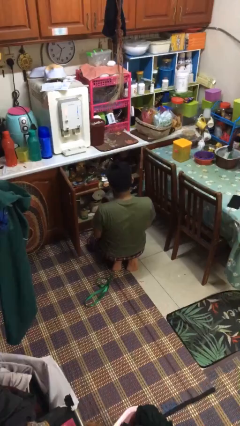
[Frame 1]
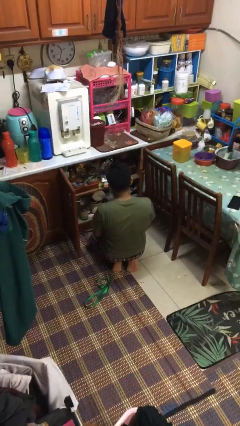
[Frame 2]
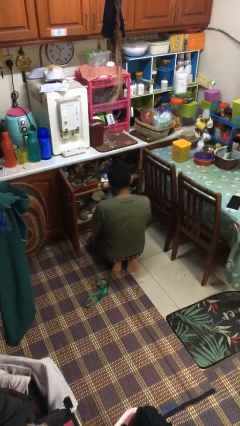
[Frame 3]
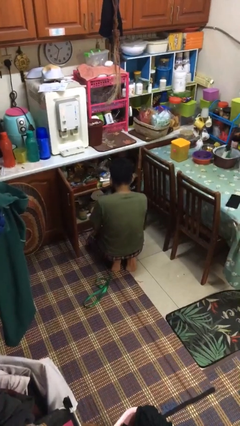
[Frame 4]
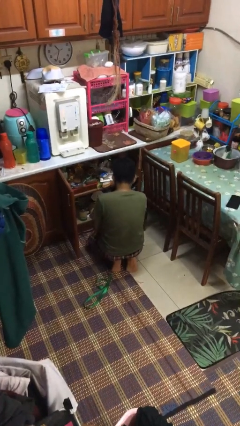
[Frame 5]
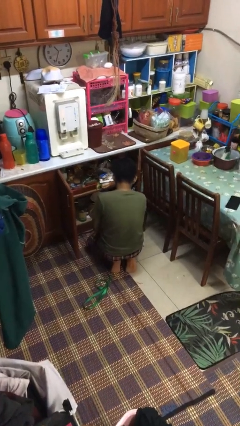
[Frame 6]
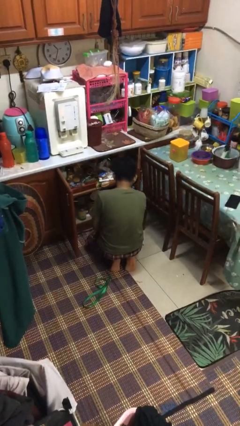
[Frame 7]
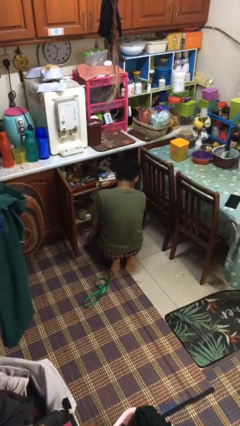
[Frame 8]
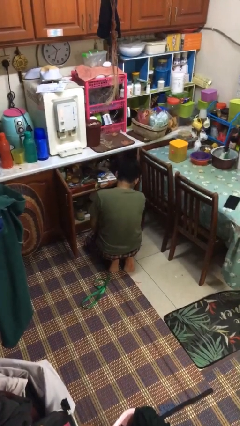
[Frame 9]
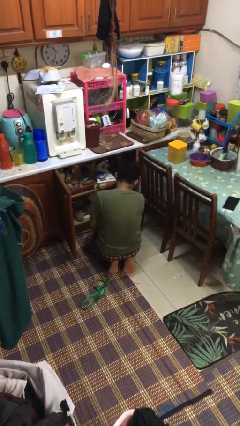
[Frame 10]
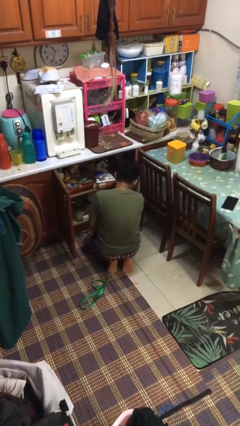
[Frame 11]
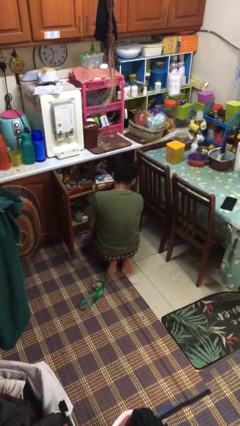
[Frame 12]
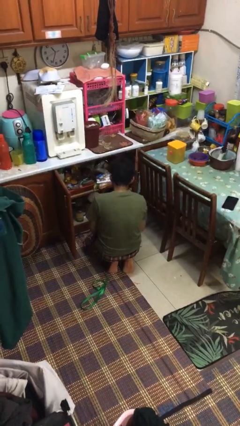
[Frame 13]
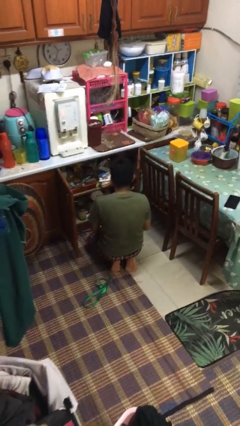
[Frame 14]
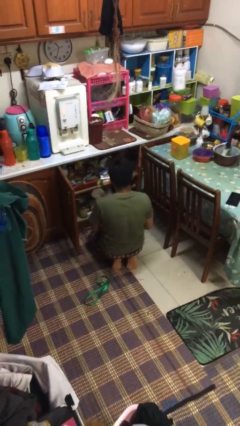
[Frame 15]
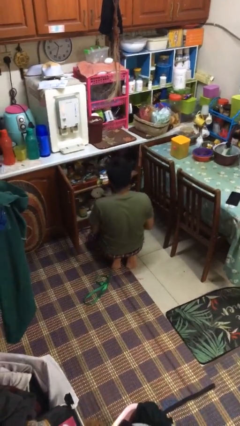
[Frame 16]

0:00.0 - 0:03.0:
person searches in kitchen drawer

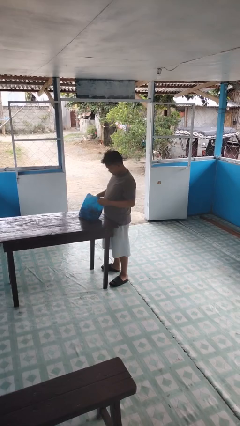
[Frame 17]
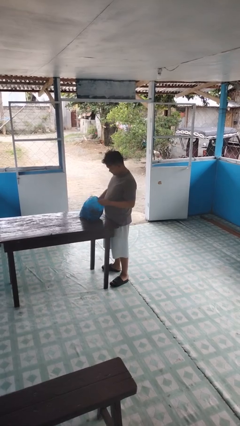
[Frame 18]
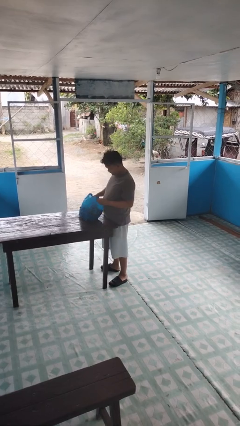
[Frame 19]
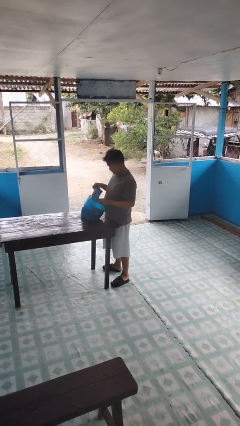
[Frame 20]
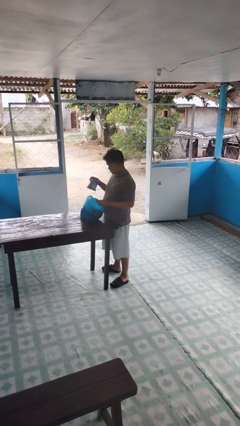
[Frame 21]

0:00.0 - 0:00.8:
person takes object from bag

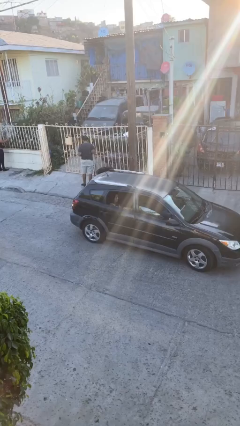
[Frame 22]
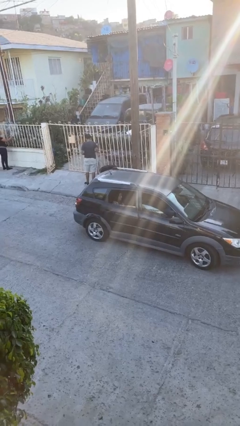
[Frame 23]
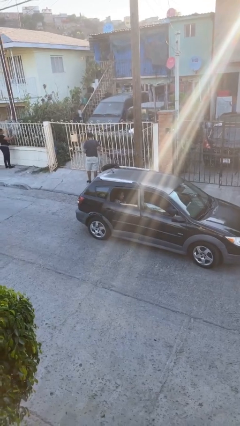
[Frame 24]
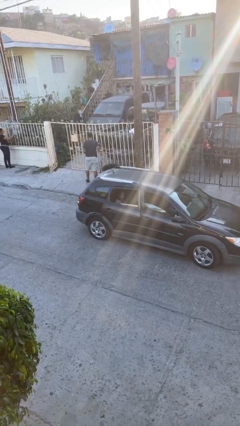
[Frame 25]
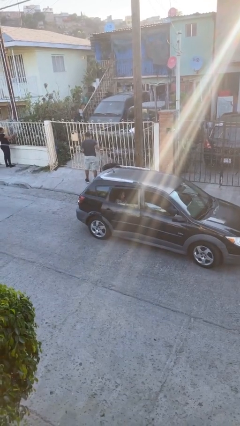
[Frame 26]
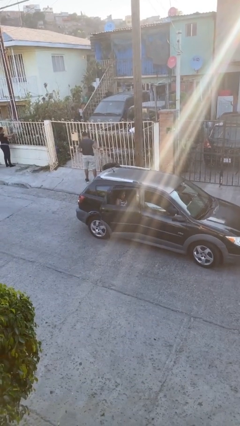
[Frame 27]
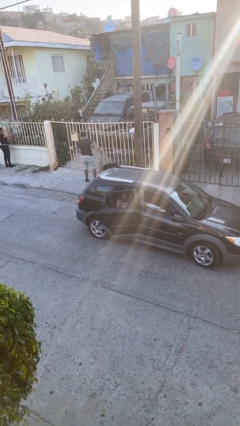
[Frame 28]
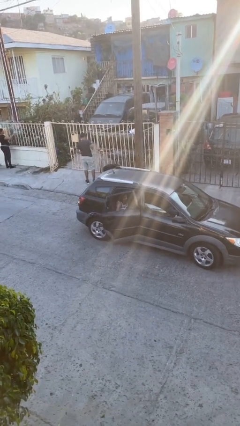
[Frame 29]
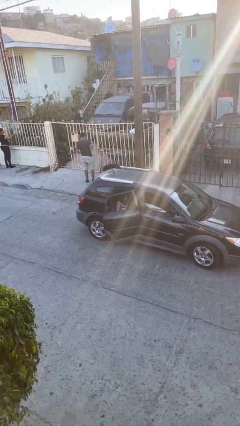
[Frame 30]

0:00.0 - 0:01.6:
person opens car door

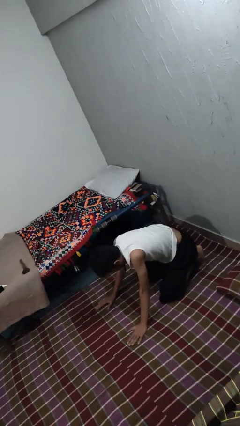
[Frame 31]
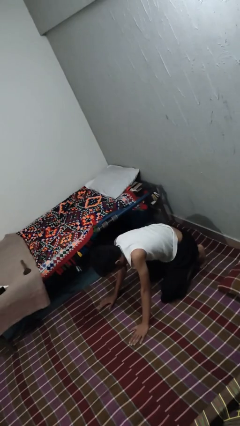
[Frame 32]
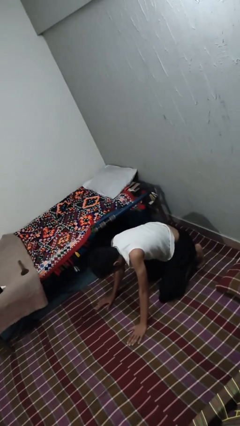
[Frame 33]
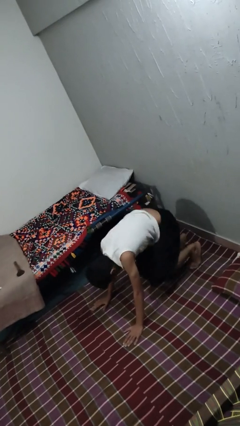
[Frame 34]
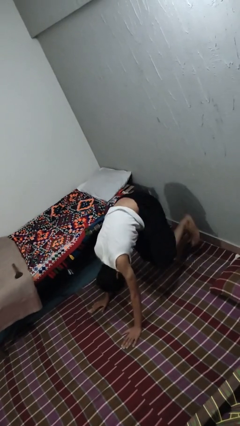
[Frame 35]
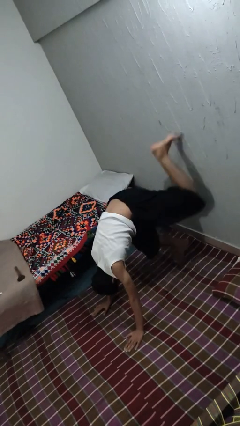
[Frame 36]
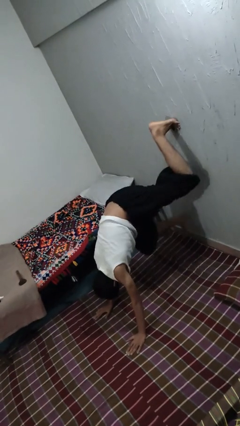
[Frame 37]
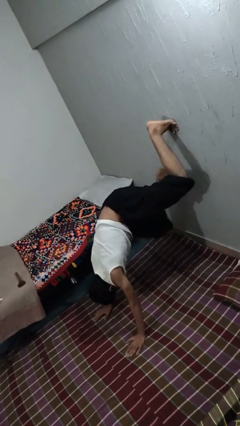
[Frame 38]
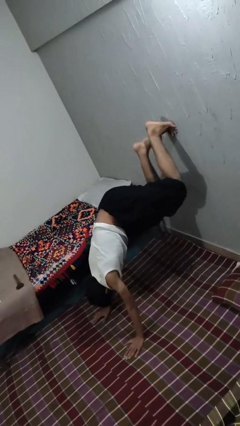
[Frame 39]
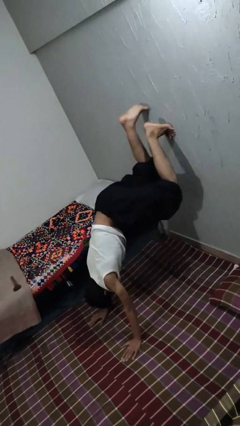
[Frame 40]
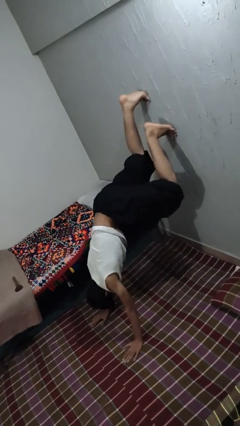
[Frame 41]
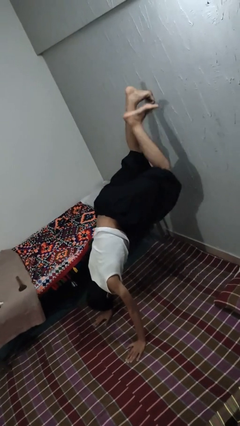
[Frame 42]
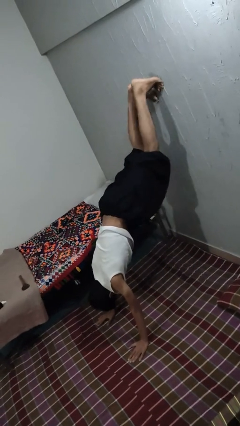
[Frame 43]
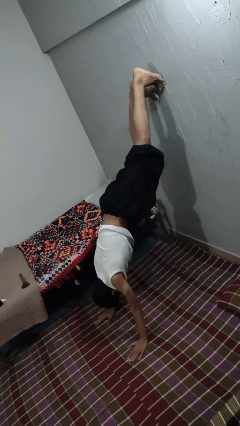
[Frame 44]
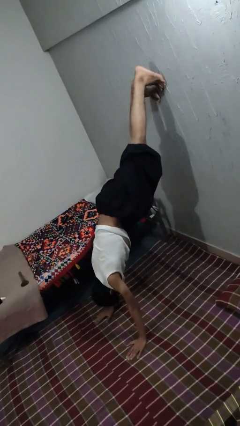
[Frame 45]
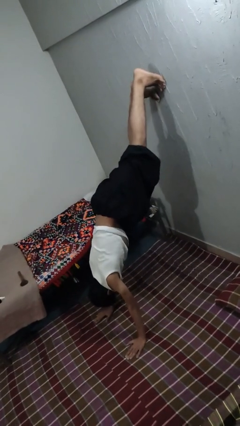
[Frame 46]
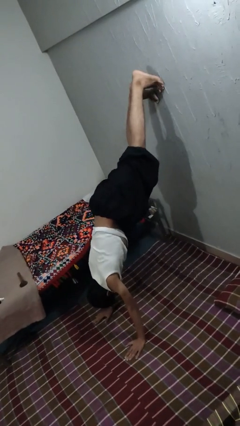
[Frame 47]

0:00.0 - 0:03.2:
person handstand

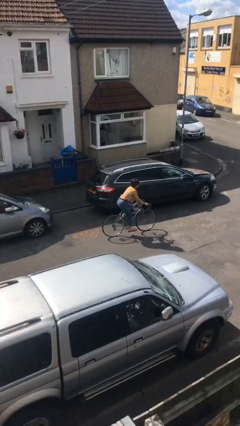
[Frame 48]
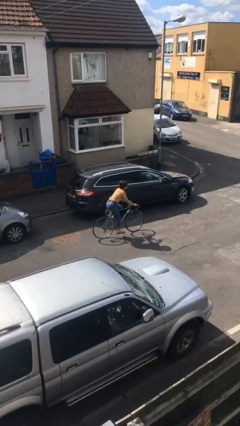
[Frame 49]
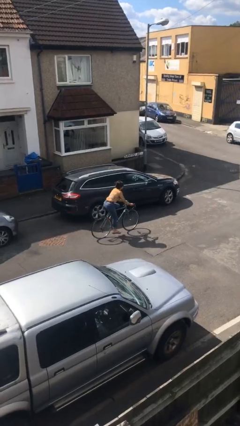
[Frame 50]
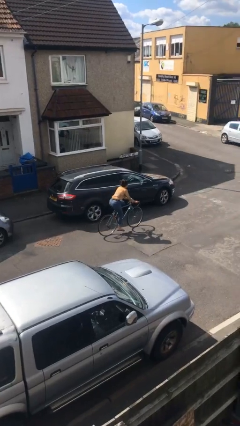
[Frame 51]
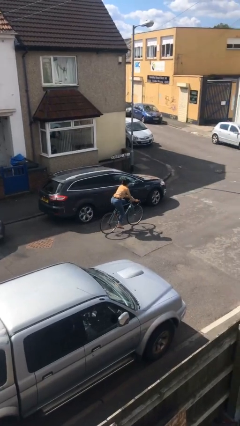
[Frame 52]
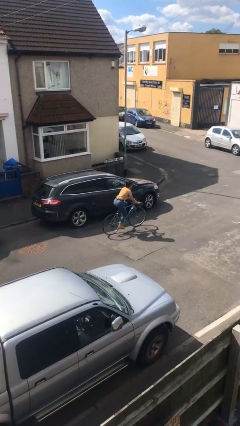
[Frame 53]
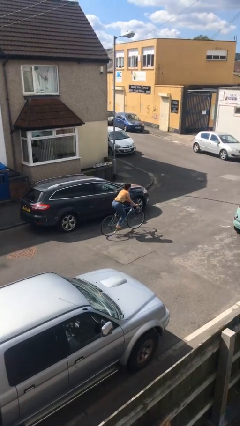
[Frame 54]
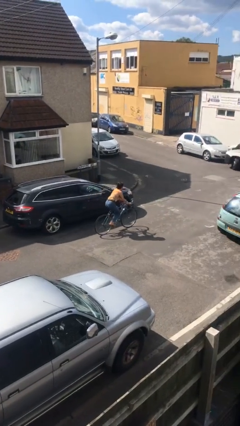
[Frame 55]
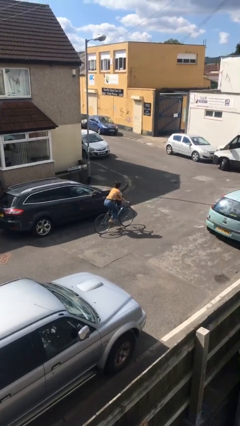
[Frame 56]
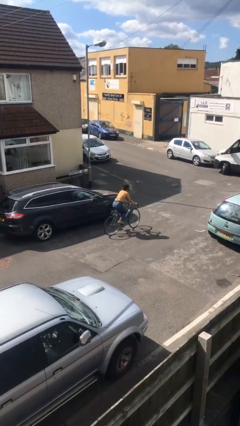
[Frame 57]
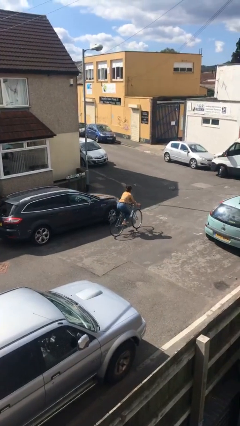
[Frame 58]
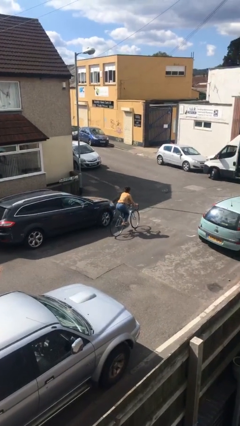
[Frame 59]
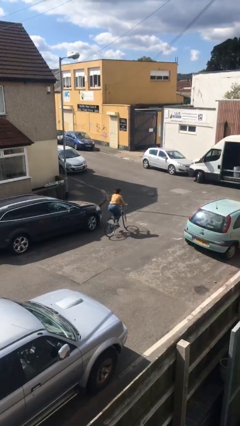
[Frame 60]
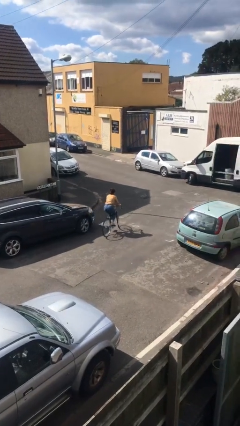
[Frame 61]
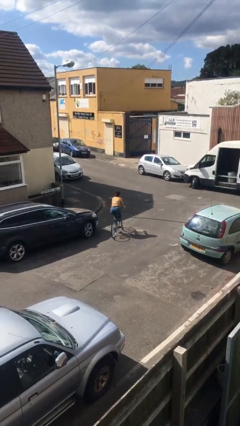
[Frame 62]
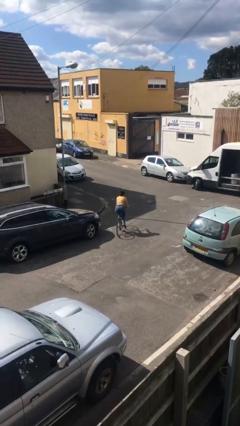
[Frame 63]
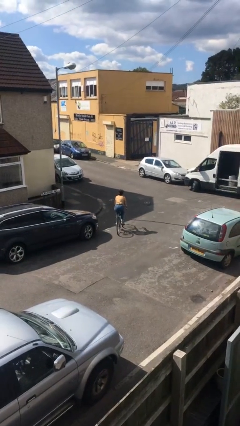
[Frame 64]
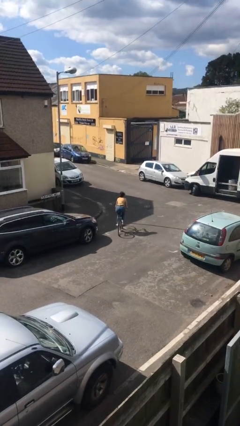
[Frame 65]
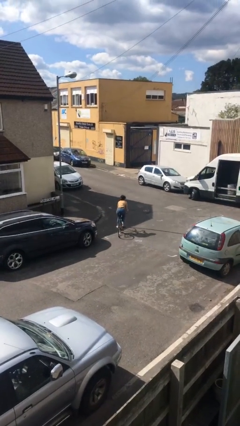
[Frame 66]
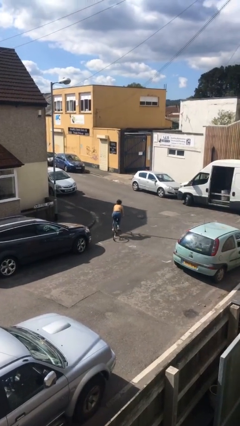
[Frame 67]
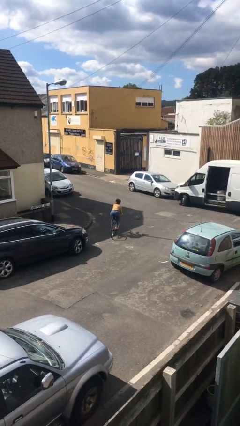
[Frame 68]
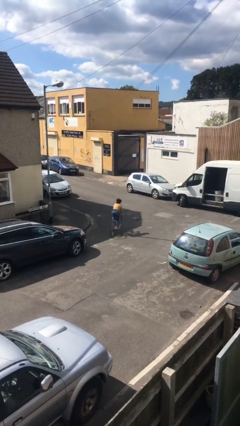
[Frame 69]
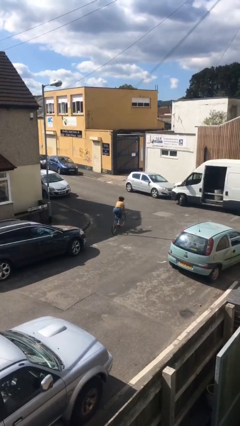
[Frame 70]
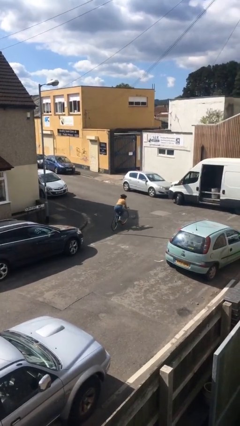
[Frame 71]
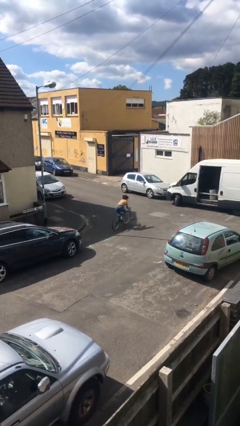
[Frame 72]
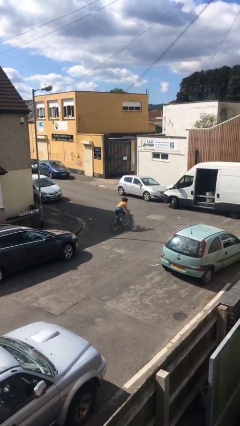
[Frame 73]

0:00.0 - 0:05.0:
person rides bicycle

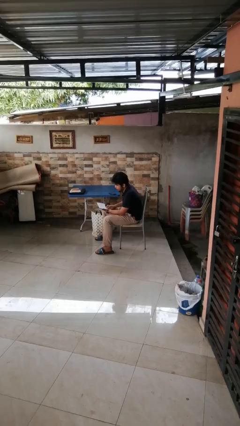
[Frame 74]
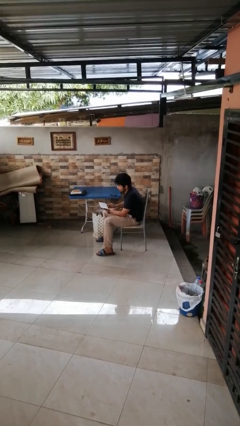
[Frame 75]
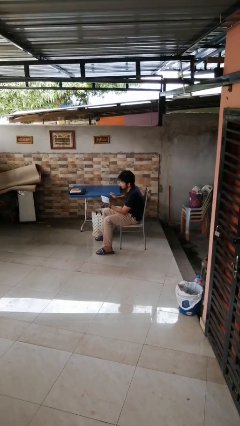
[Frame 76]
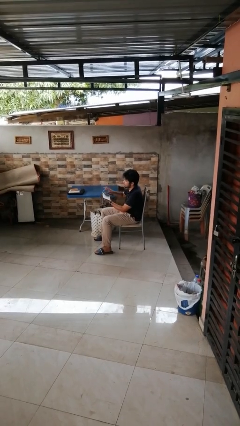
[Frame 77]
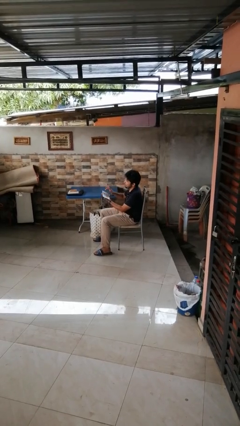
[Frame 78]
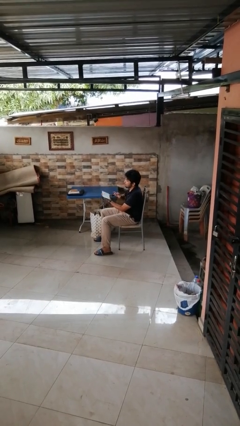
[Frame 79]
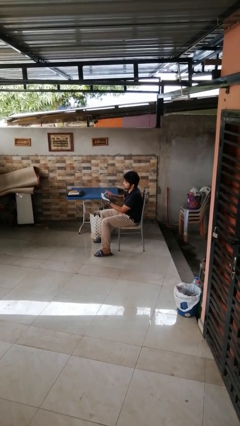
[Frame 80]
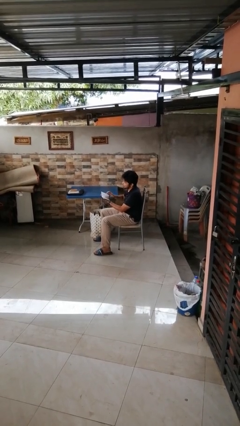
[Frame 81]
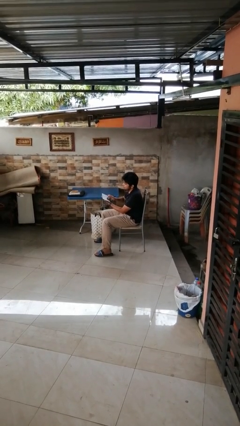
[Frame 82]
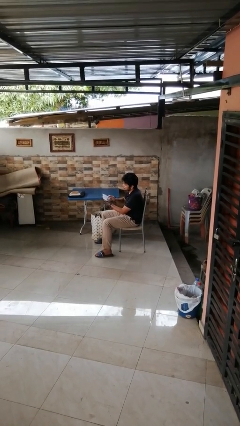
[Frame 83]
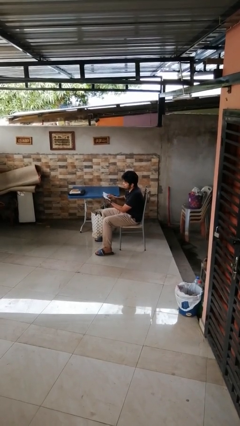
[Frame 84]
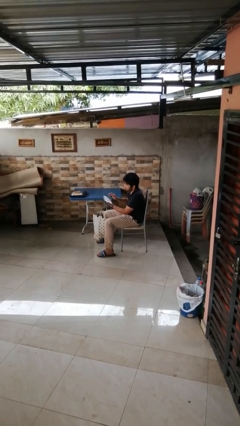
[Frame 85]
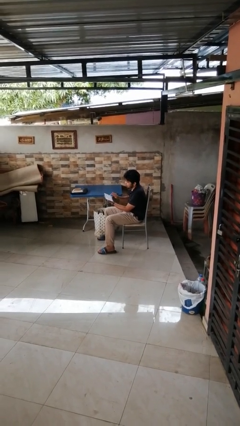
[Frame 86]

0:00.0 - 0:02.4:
person interacts with tablet

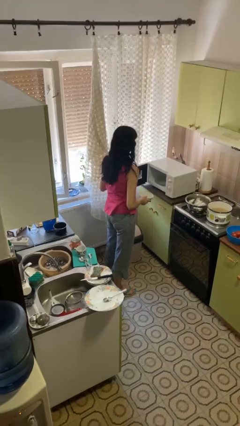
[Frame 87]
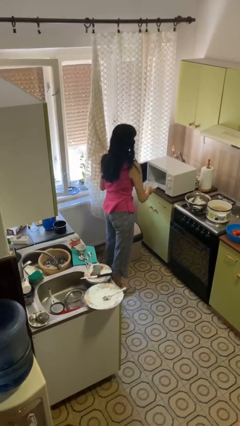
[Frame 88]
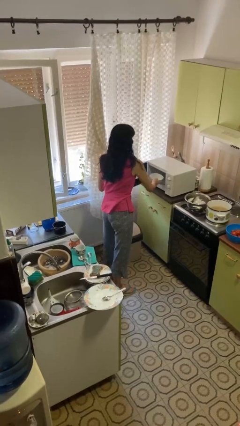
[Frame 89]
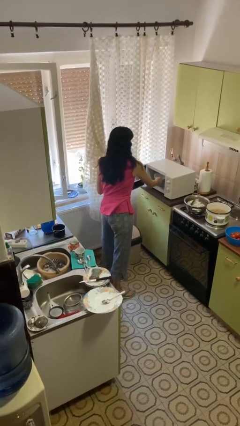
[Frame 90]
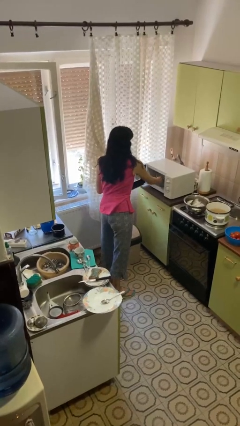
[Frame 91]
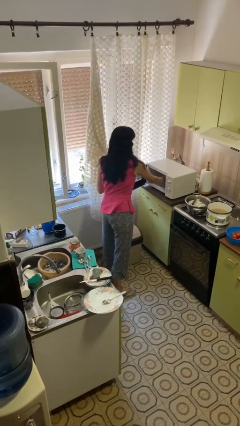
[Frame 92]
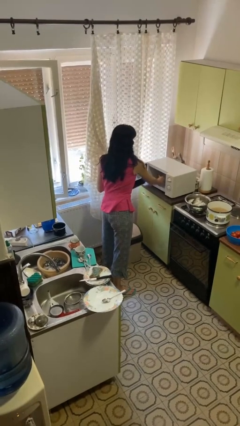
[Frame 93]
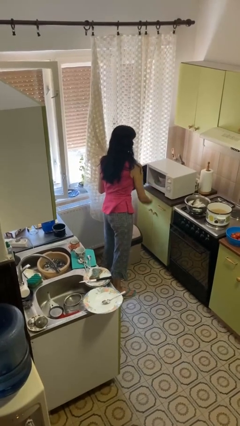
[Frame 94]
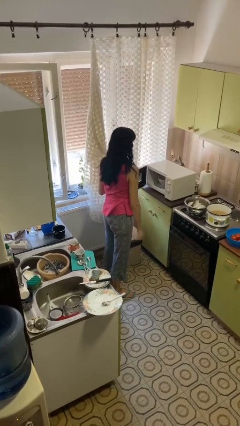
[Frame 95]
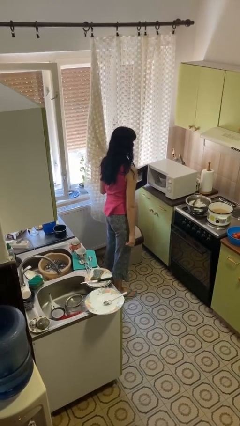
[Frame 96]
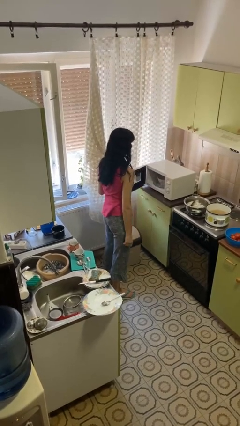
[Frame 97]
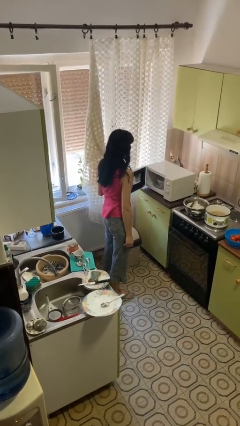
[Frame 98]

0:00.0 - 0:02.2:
person puts object into microwave
